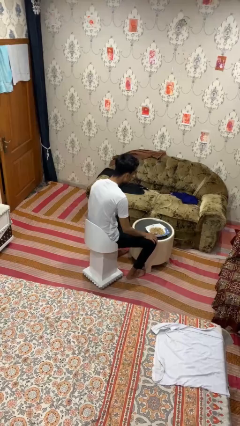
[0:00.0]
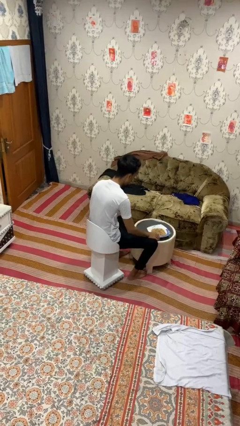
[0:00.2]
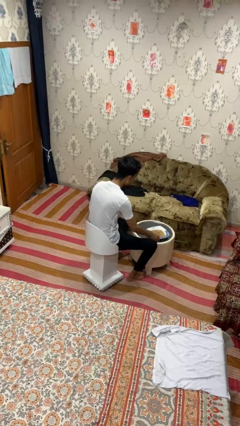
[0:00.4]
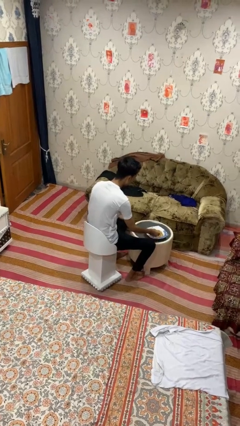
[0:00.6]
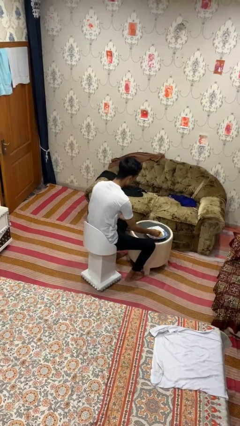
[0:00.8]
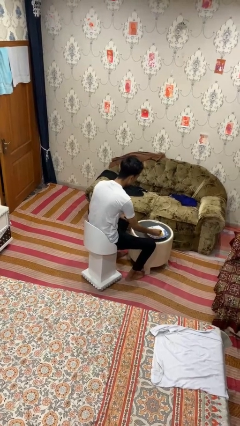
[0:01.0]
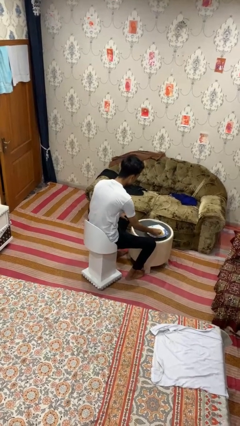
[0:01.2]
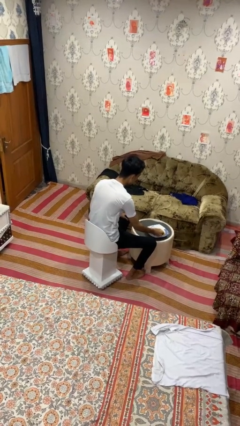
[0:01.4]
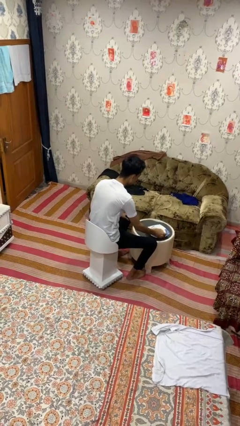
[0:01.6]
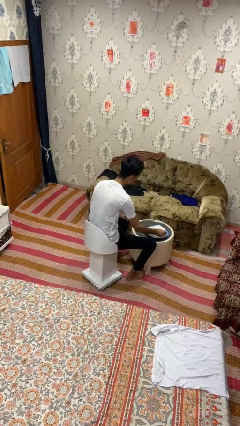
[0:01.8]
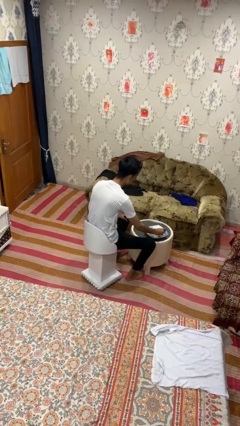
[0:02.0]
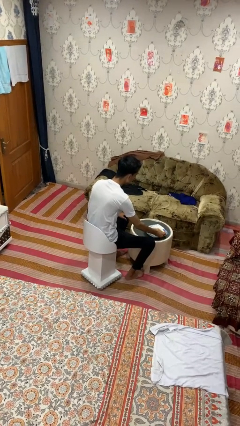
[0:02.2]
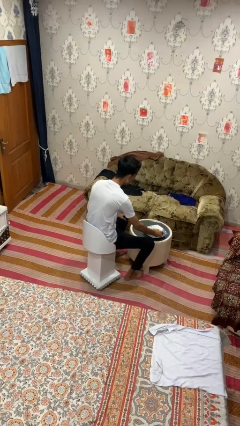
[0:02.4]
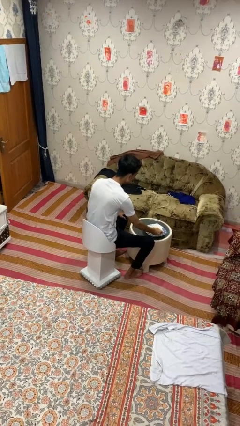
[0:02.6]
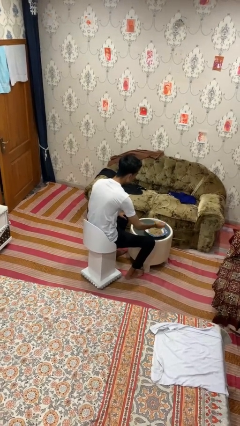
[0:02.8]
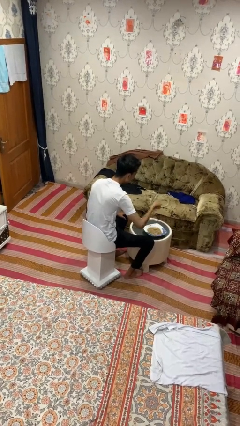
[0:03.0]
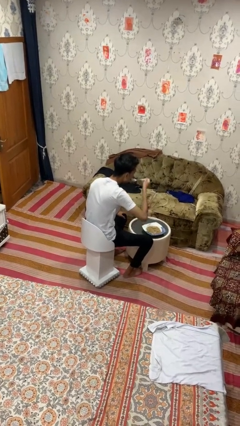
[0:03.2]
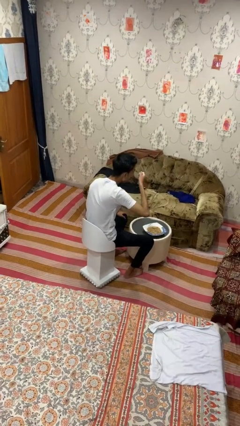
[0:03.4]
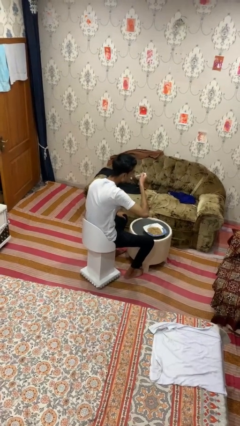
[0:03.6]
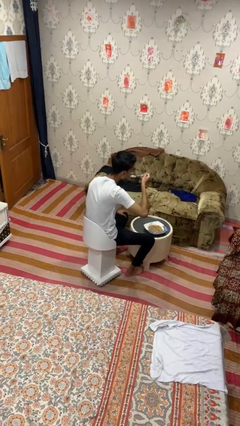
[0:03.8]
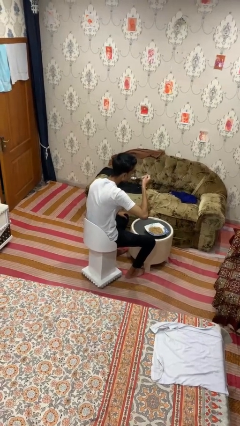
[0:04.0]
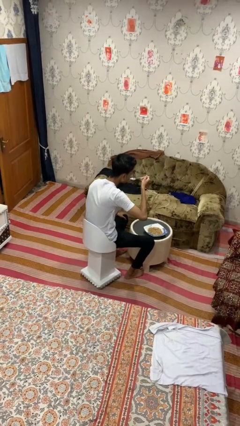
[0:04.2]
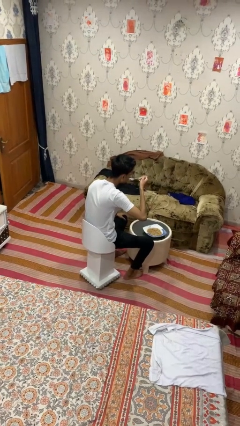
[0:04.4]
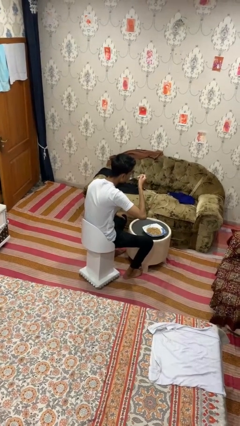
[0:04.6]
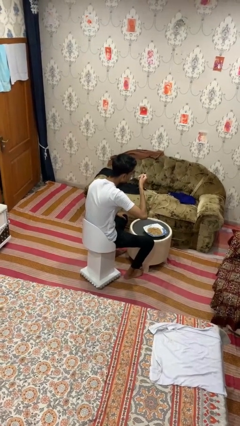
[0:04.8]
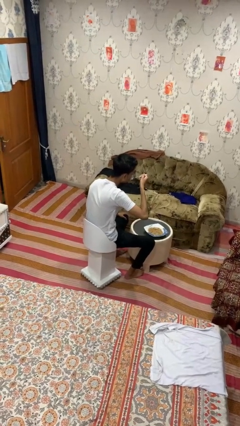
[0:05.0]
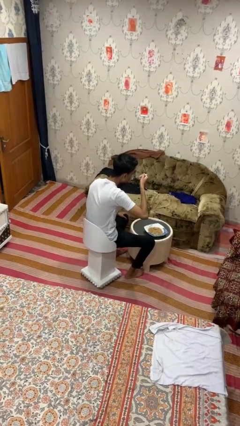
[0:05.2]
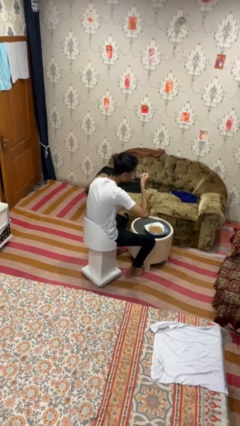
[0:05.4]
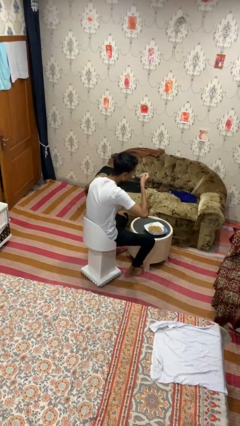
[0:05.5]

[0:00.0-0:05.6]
person eats with utensil

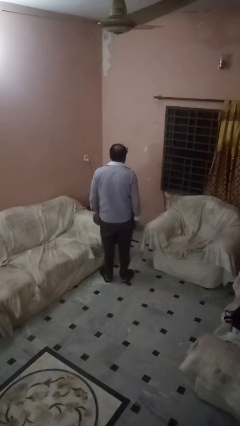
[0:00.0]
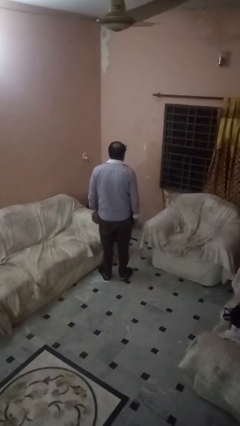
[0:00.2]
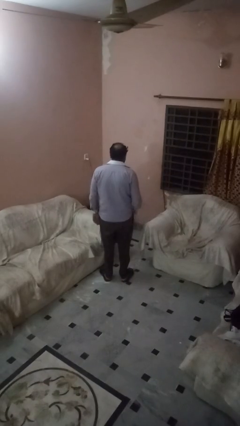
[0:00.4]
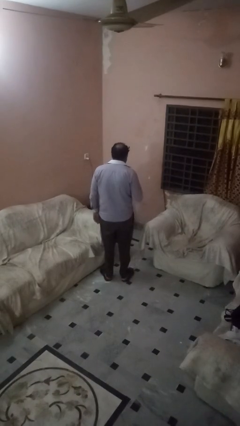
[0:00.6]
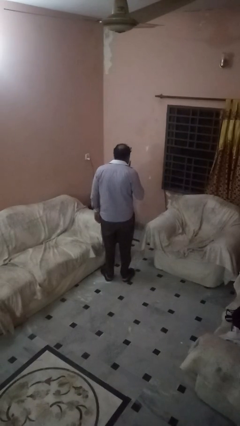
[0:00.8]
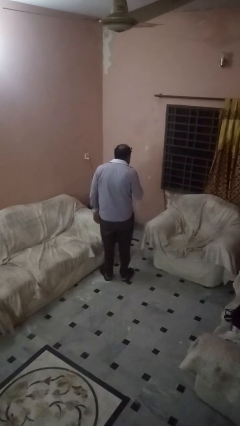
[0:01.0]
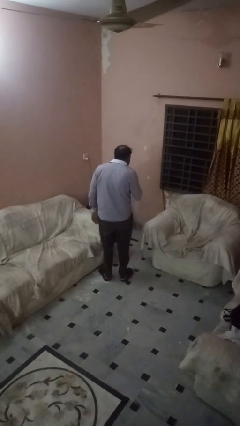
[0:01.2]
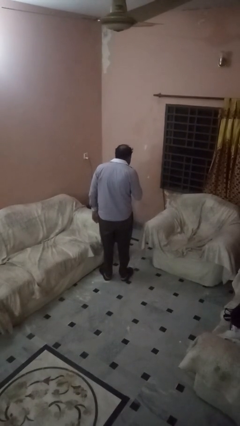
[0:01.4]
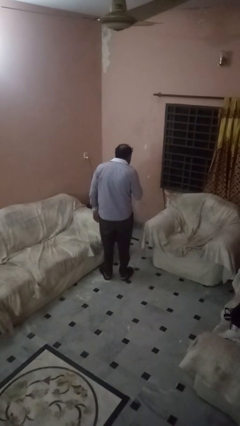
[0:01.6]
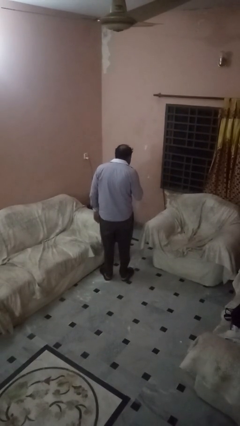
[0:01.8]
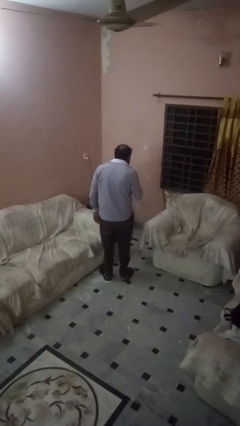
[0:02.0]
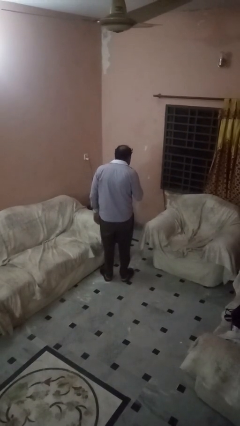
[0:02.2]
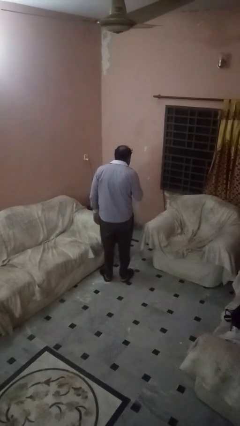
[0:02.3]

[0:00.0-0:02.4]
person gestures be quiet

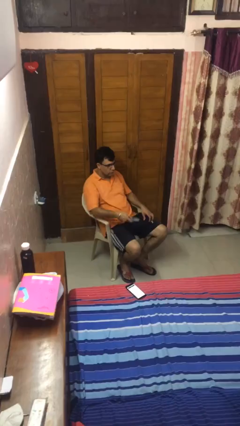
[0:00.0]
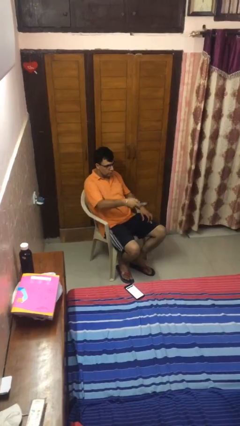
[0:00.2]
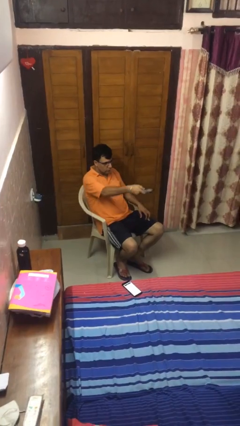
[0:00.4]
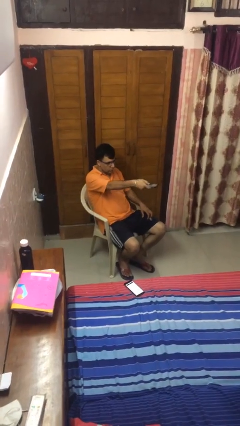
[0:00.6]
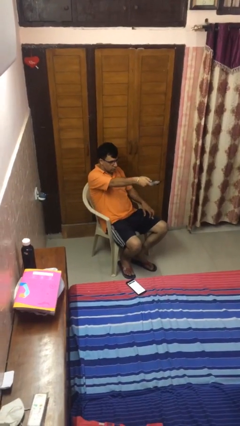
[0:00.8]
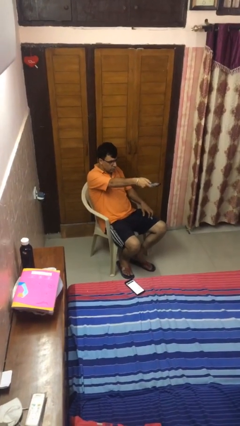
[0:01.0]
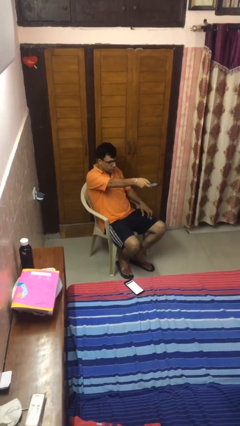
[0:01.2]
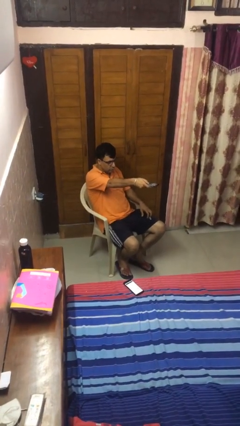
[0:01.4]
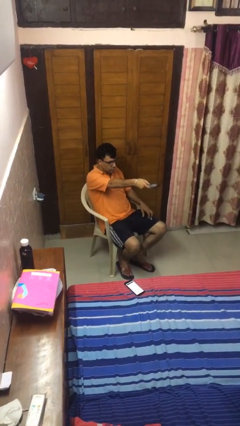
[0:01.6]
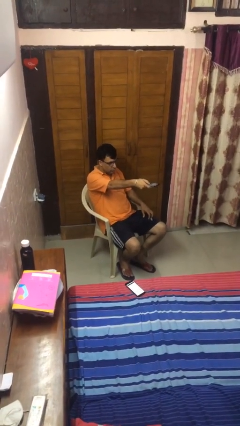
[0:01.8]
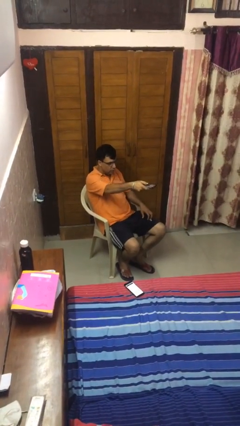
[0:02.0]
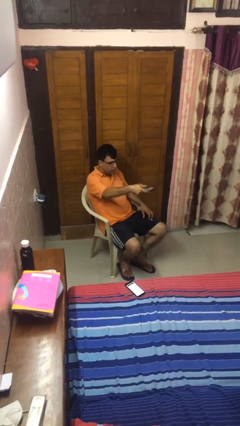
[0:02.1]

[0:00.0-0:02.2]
person uses television remote

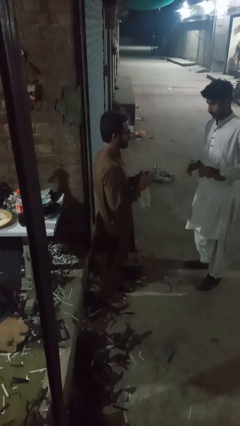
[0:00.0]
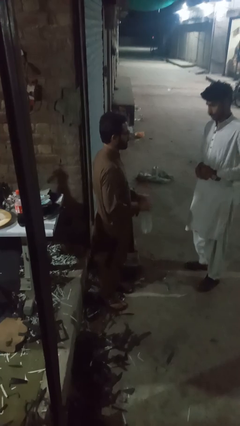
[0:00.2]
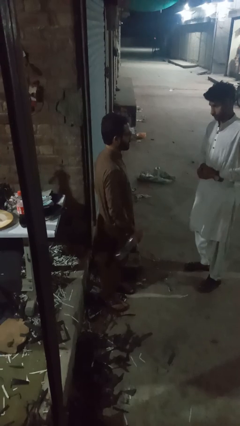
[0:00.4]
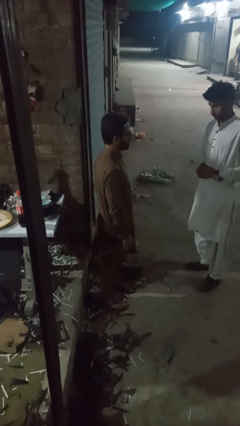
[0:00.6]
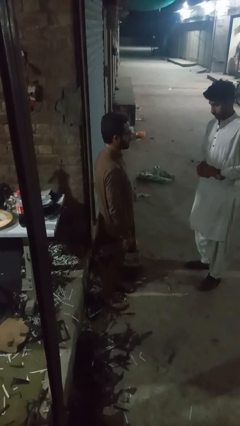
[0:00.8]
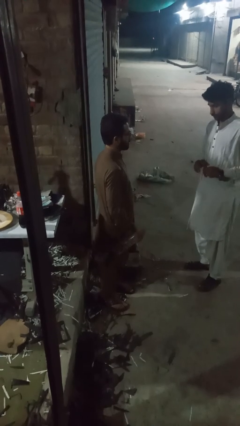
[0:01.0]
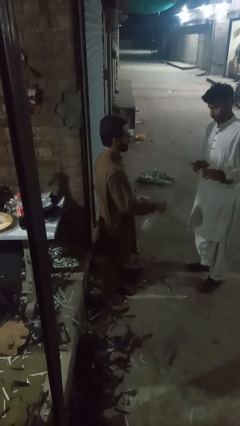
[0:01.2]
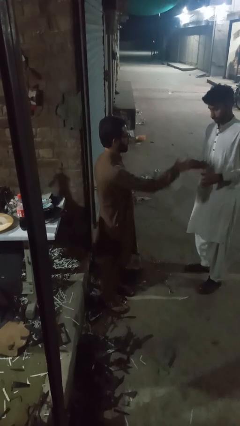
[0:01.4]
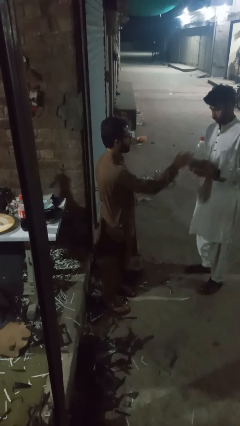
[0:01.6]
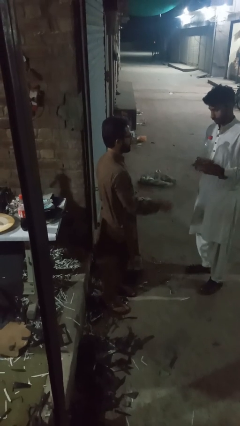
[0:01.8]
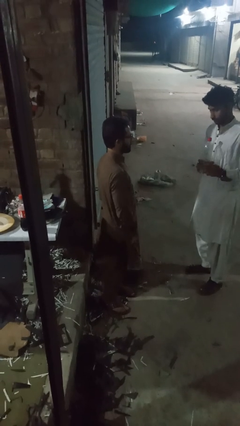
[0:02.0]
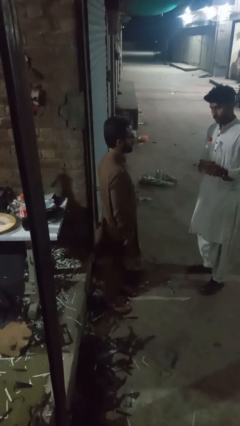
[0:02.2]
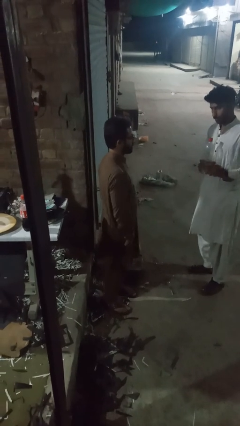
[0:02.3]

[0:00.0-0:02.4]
person throws object to person

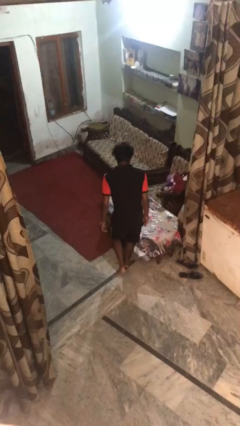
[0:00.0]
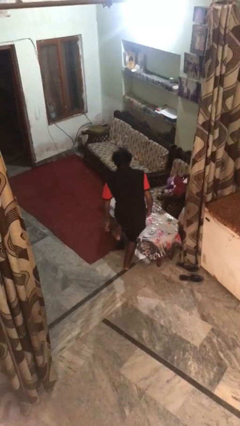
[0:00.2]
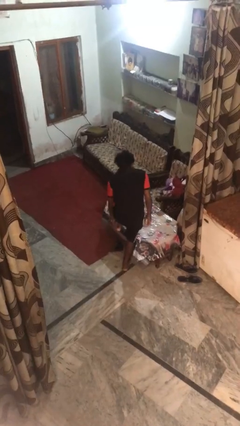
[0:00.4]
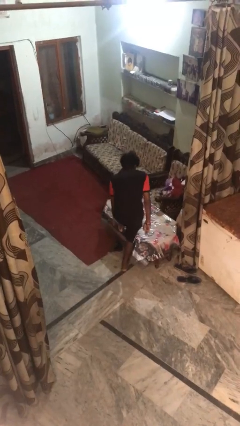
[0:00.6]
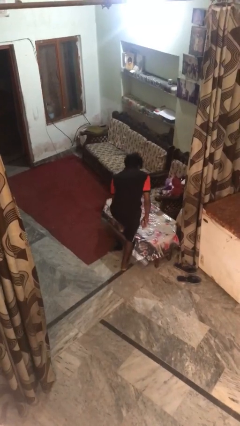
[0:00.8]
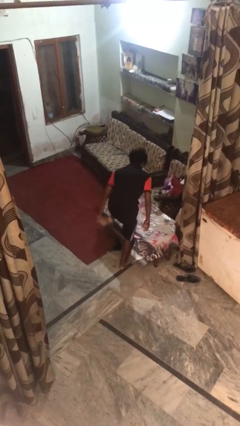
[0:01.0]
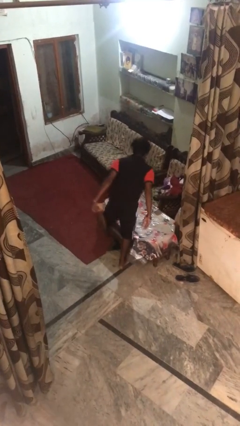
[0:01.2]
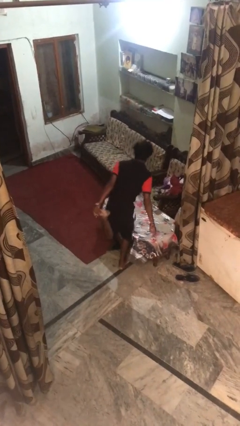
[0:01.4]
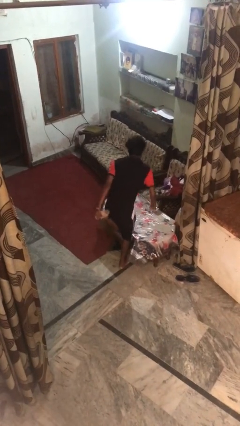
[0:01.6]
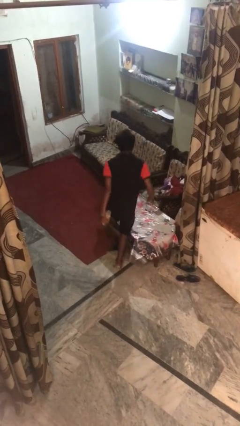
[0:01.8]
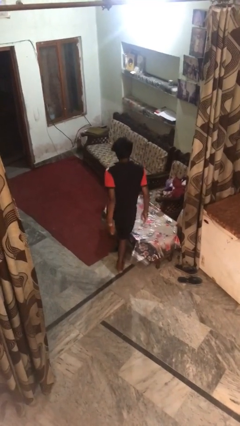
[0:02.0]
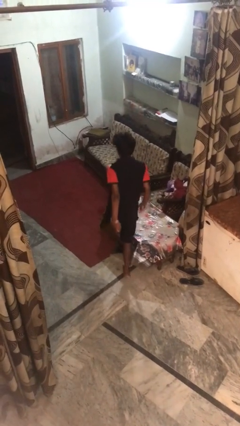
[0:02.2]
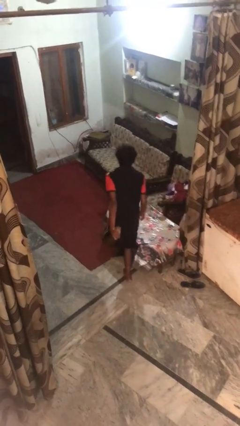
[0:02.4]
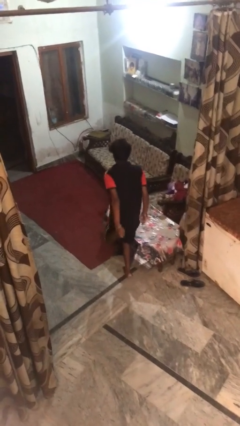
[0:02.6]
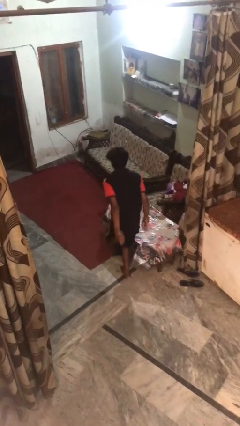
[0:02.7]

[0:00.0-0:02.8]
person stubs toe

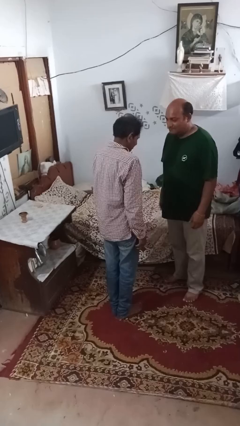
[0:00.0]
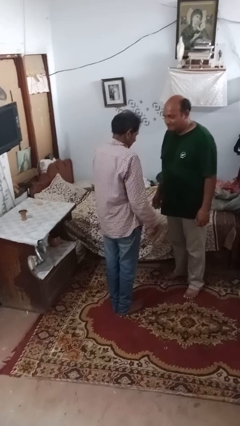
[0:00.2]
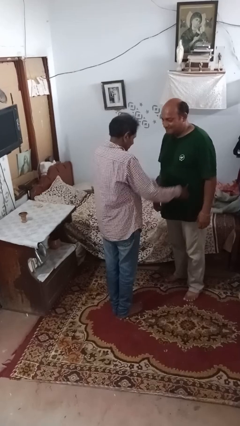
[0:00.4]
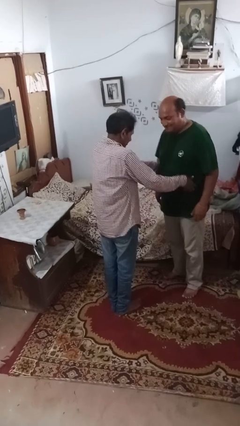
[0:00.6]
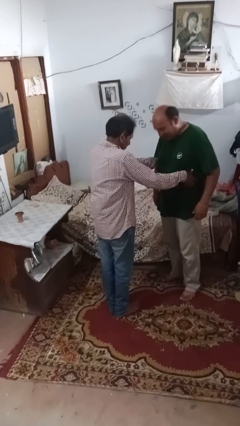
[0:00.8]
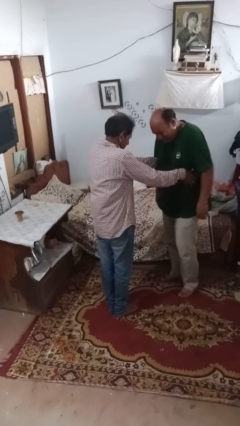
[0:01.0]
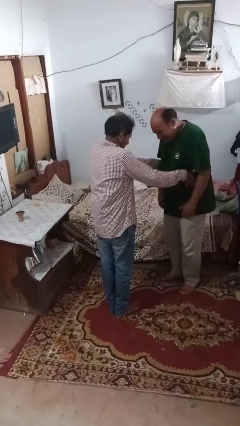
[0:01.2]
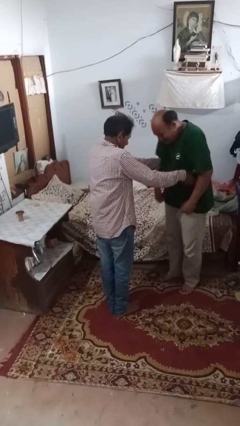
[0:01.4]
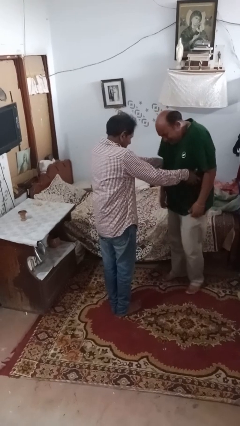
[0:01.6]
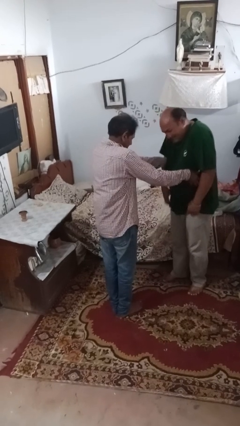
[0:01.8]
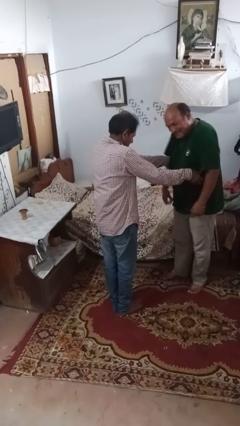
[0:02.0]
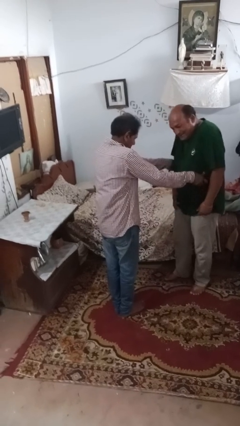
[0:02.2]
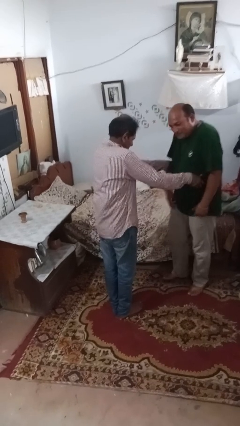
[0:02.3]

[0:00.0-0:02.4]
person tickles person
